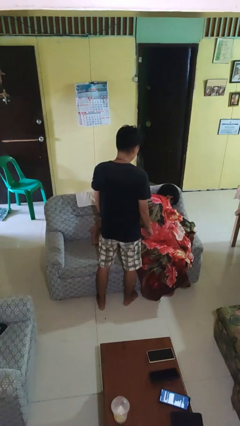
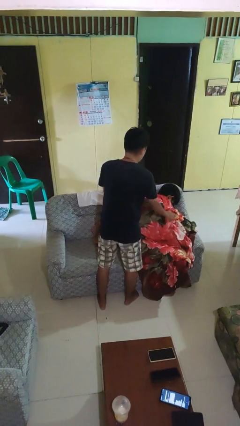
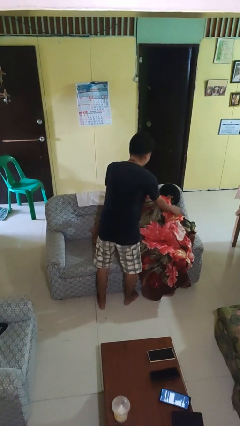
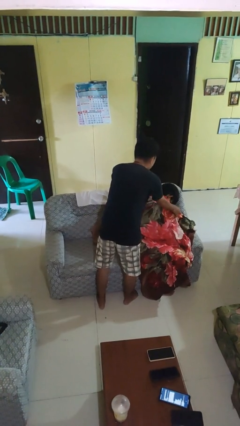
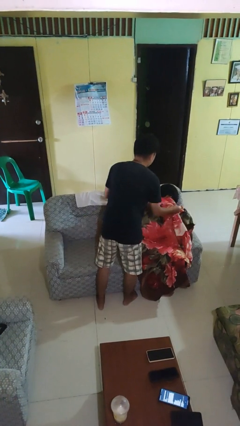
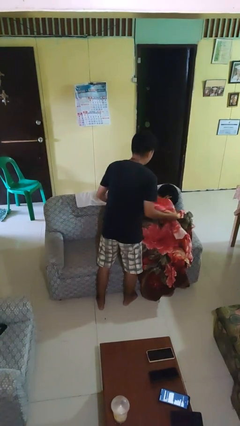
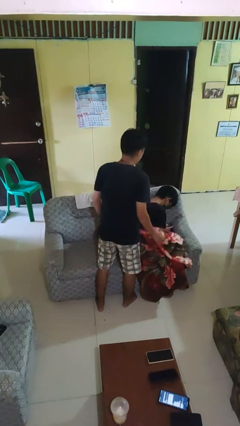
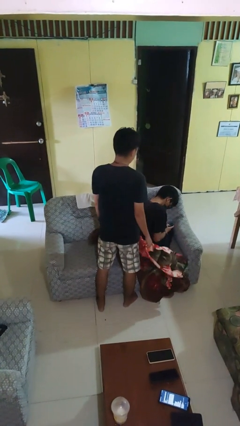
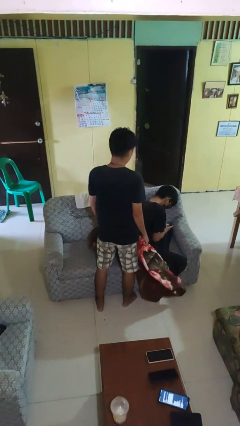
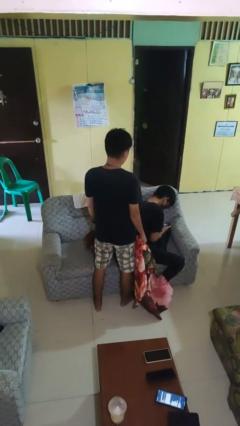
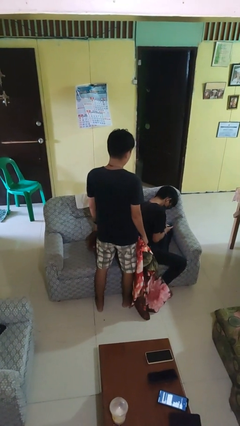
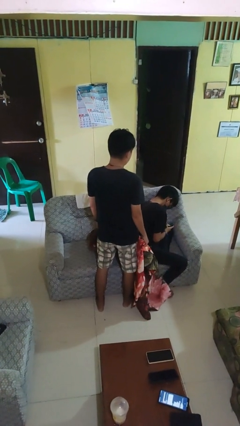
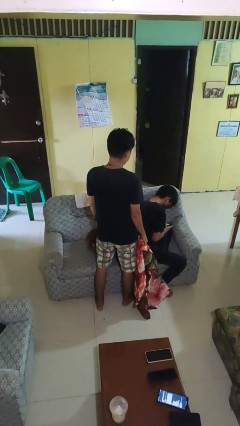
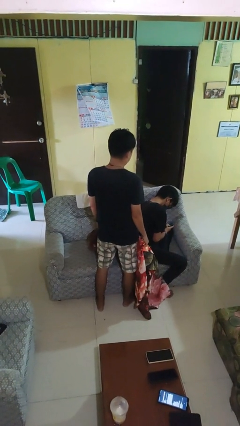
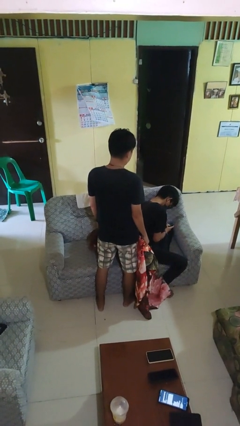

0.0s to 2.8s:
person uncovers friend with blanket

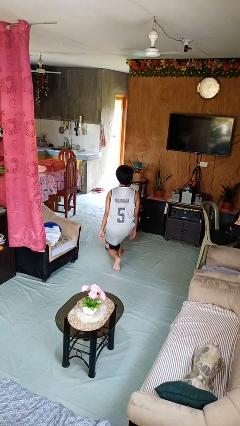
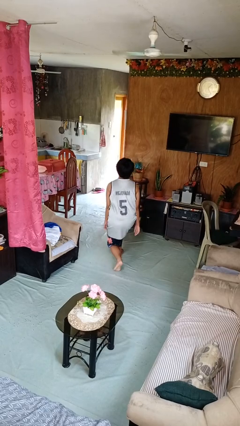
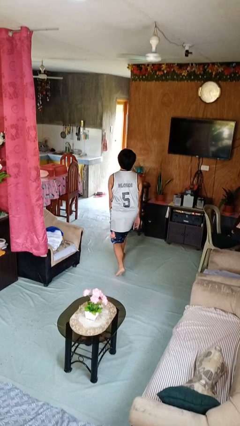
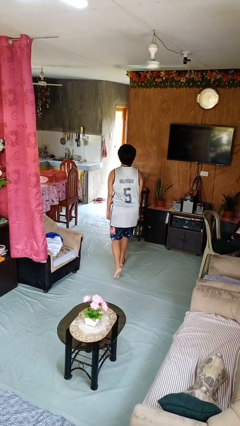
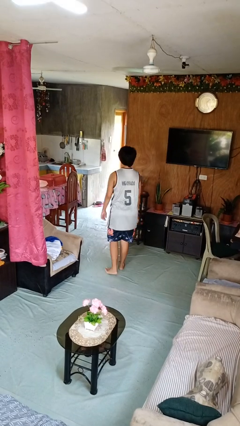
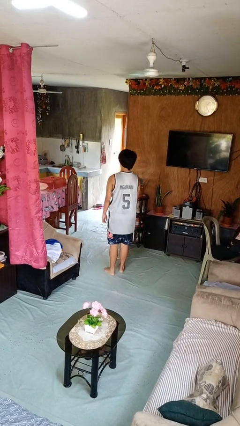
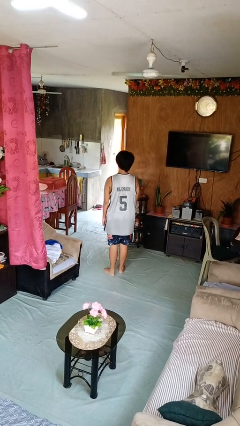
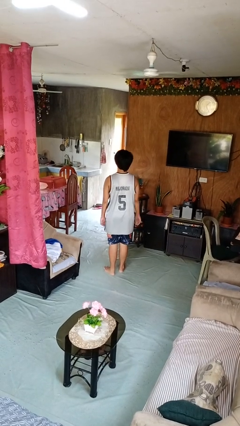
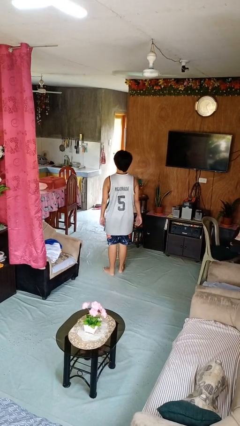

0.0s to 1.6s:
person stands up from floor

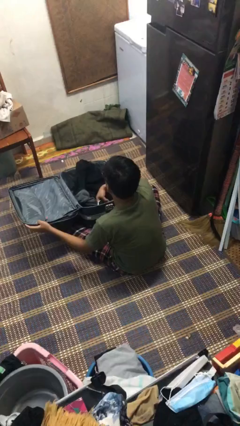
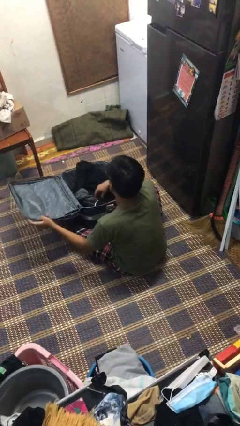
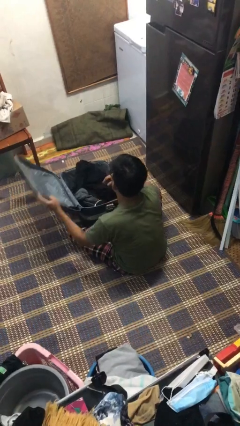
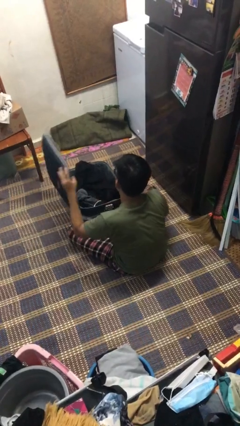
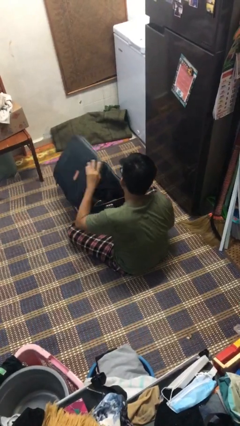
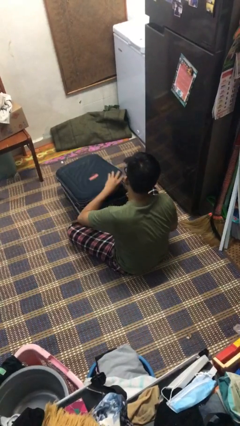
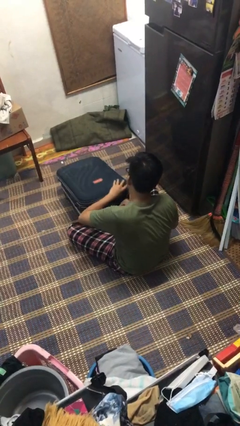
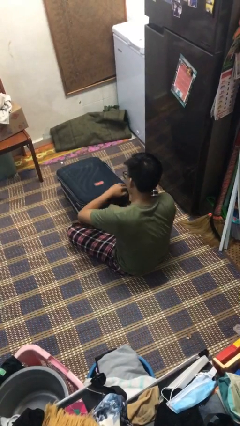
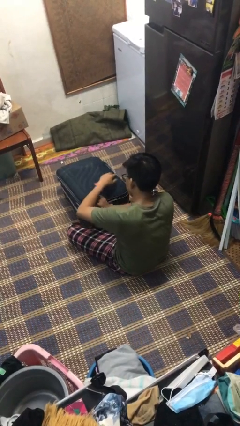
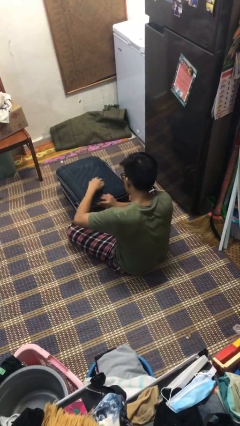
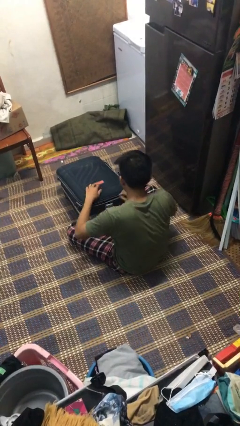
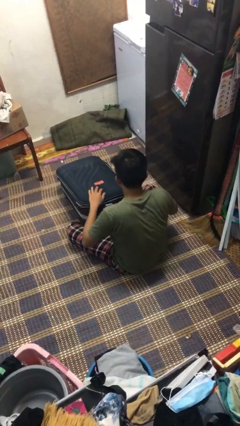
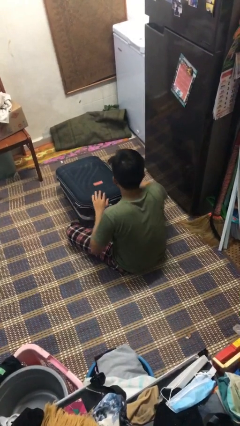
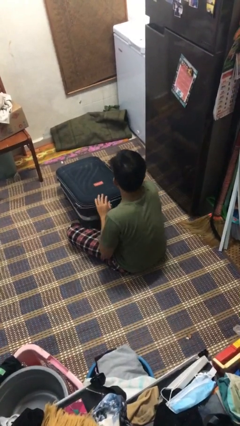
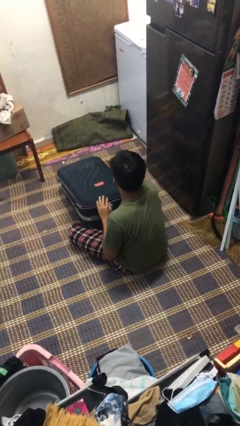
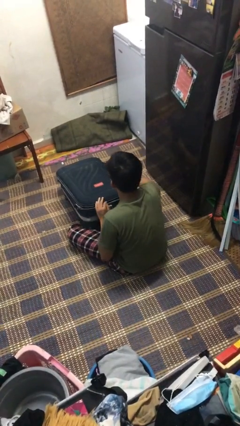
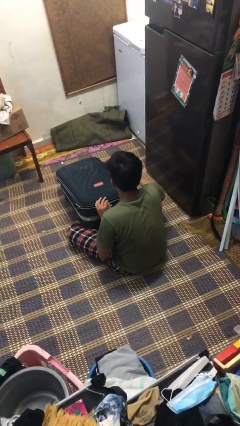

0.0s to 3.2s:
person closes suitcase

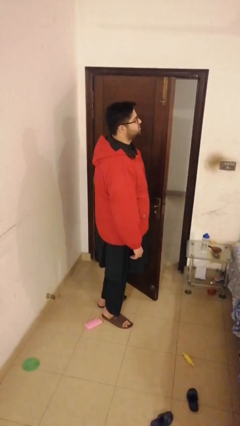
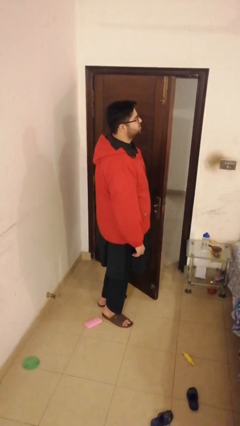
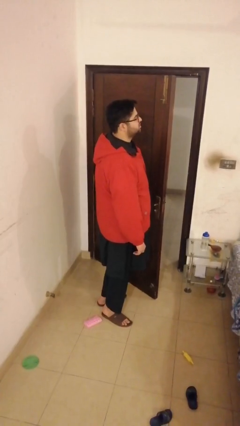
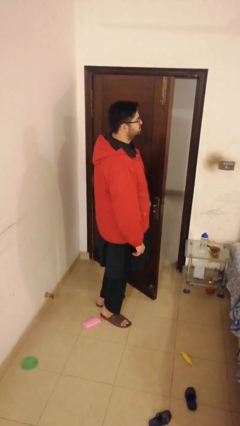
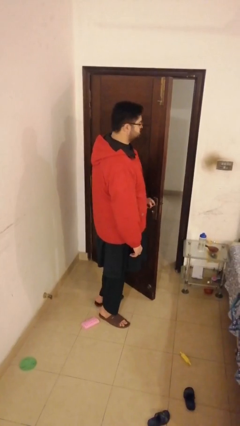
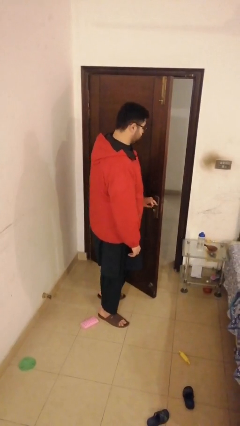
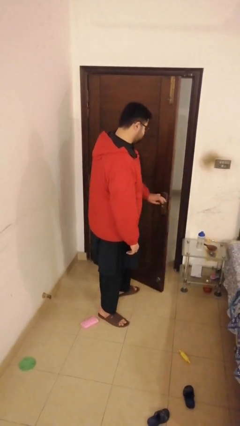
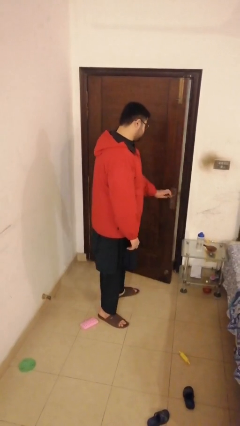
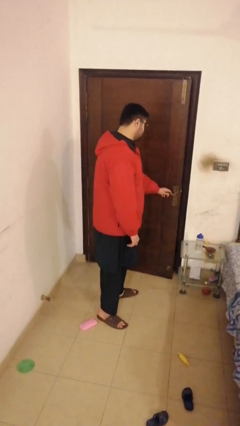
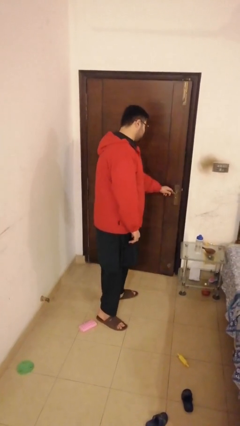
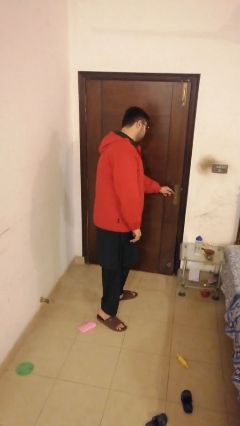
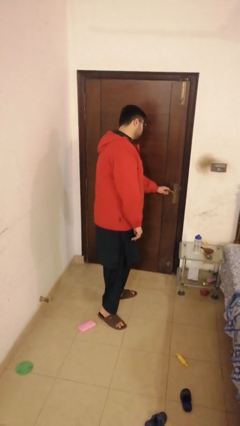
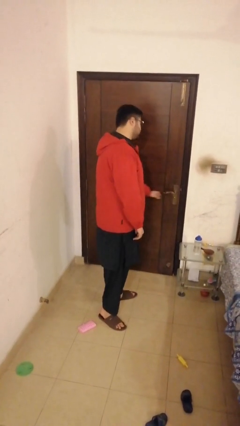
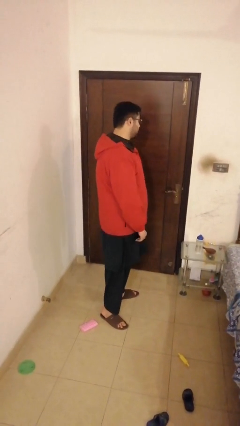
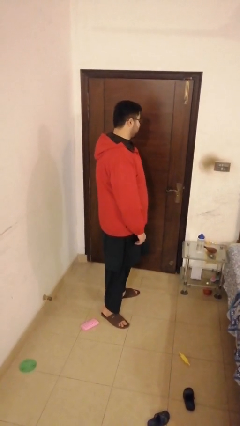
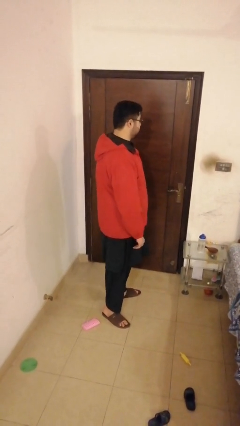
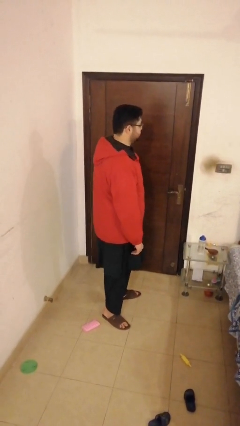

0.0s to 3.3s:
person closes facility door

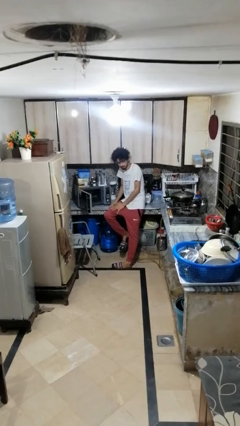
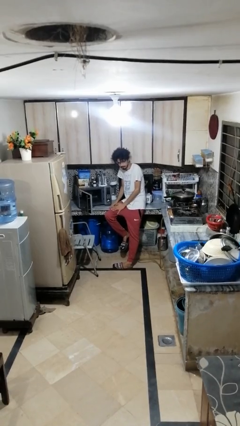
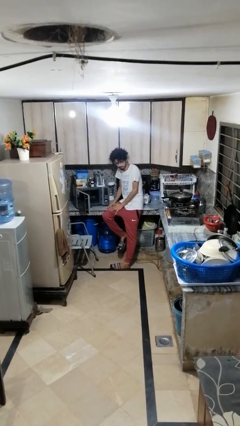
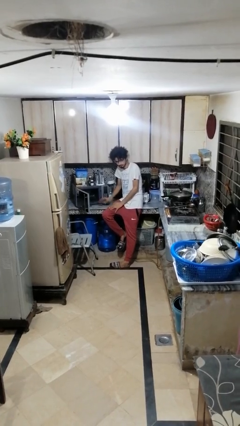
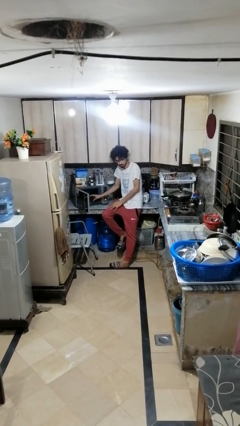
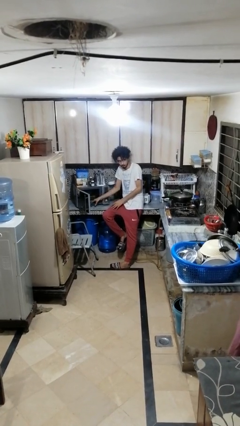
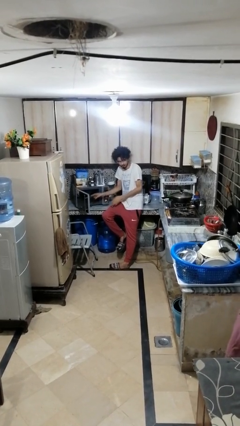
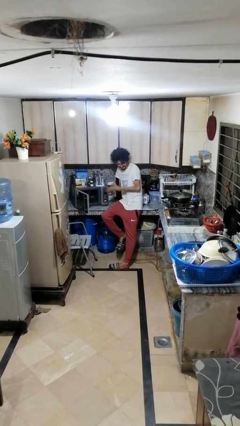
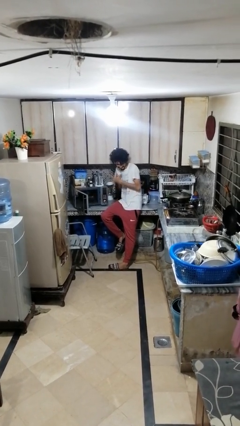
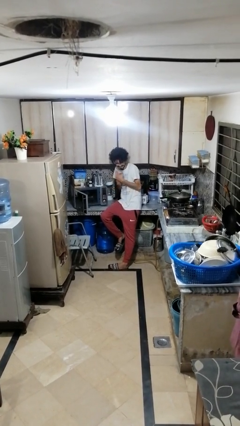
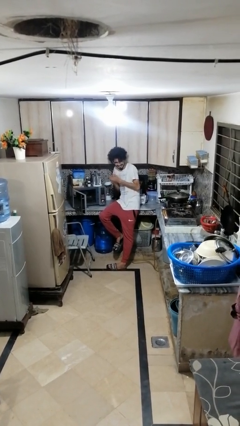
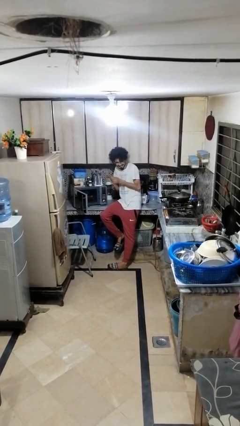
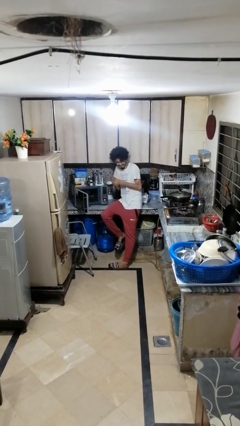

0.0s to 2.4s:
person burns hand

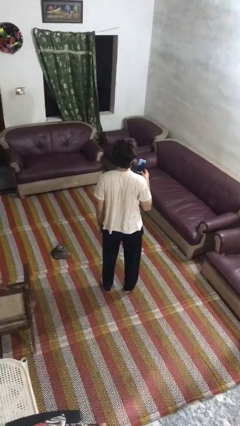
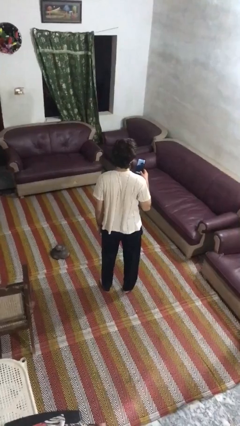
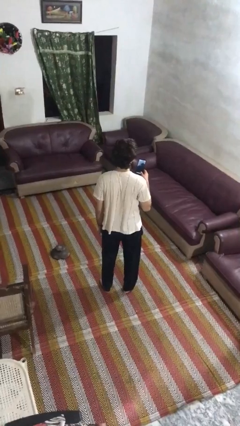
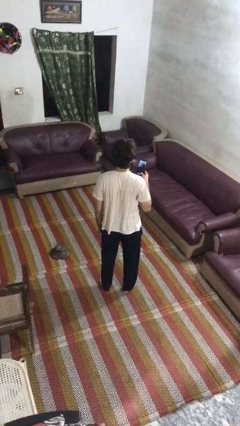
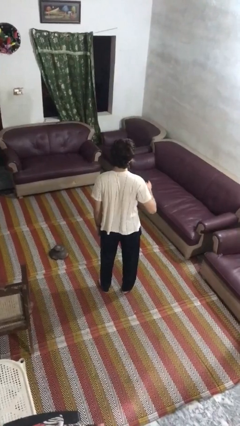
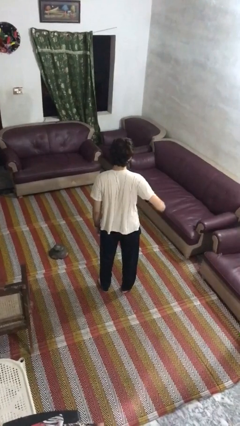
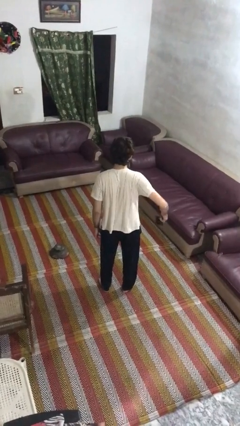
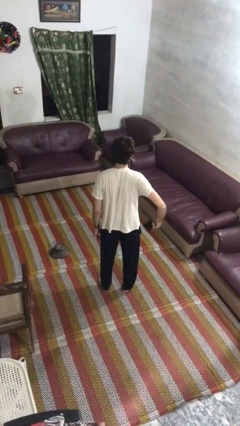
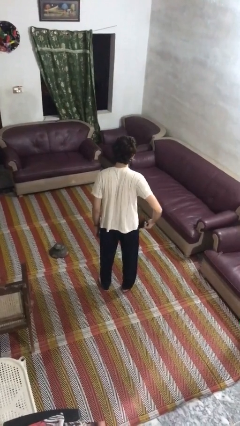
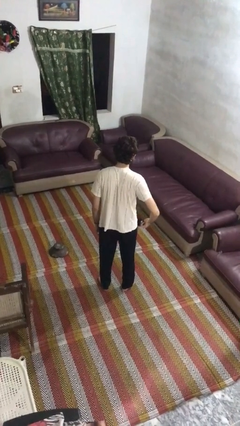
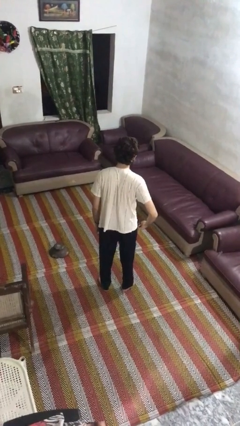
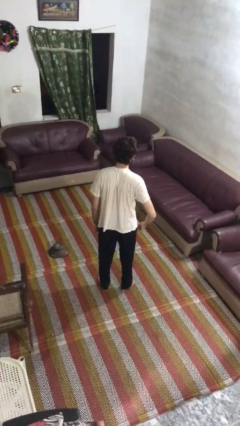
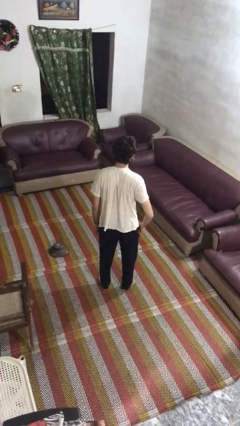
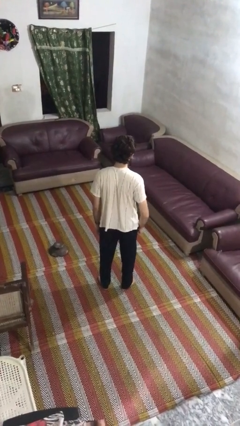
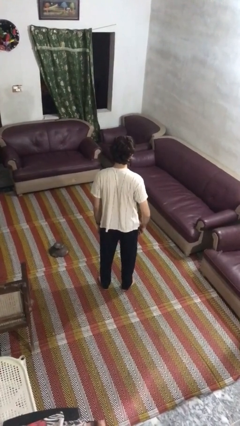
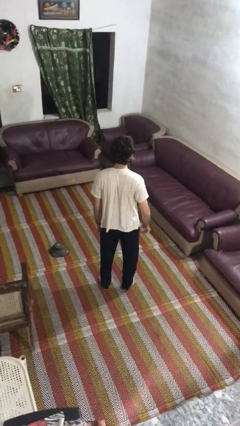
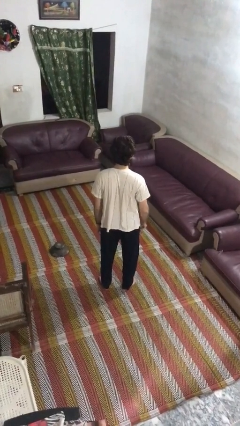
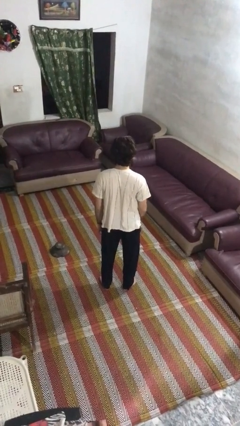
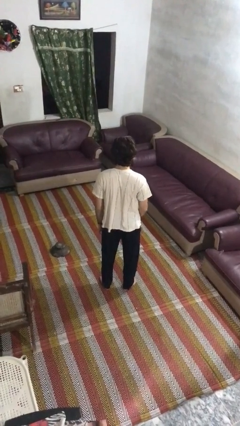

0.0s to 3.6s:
person puts phone into pocket

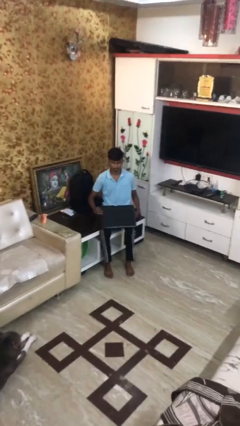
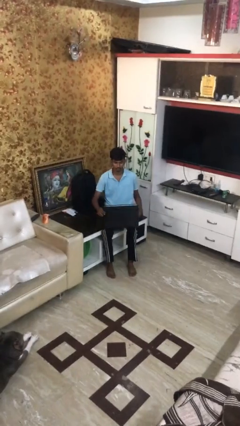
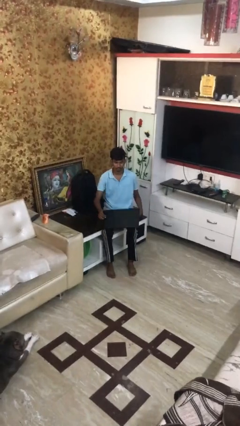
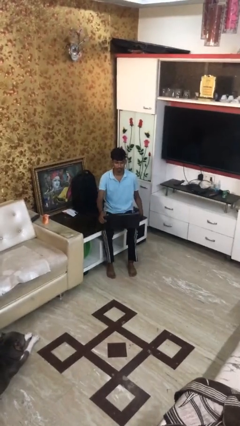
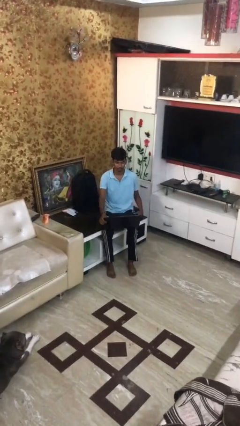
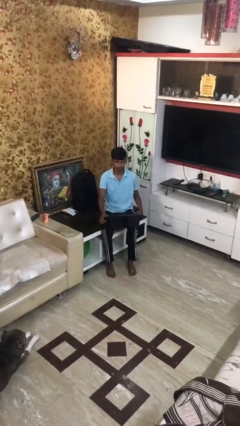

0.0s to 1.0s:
person opens laptop
